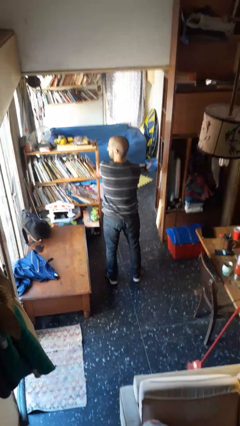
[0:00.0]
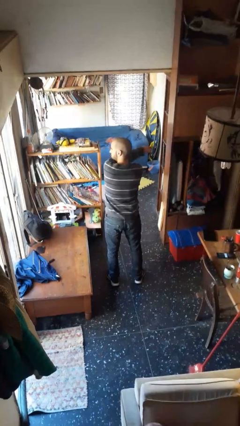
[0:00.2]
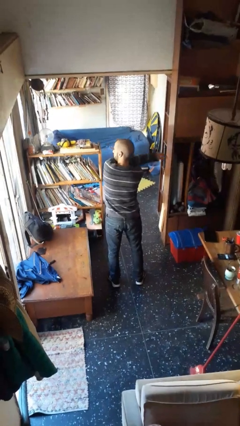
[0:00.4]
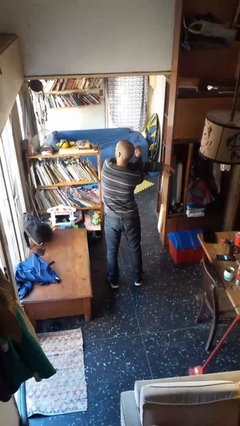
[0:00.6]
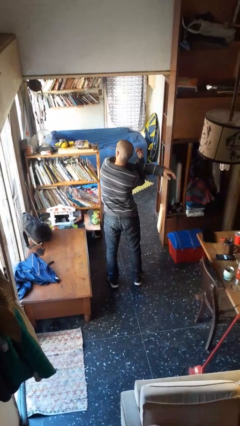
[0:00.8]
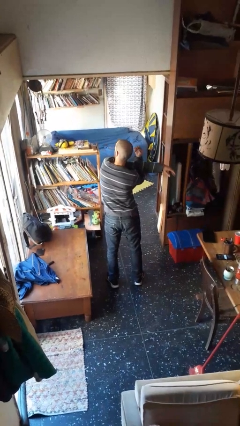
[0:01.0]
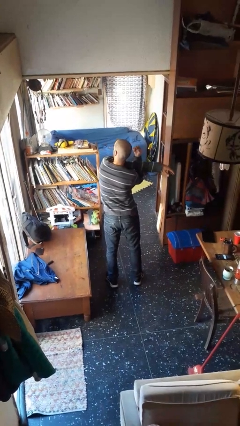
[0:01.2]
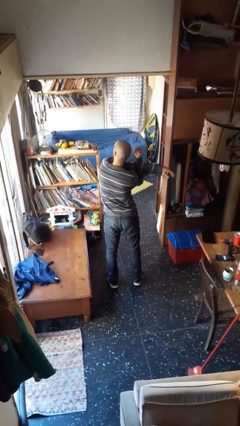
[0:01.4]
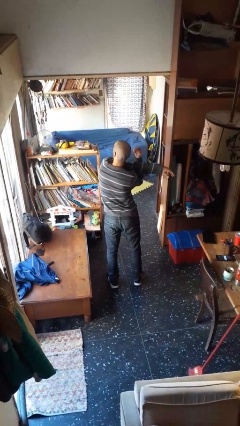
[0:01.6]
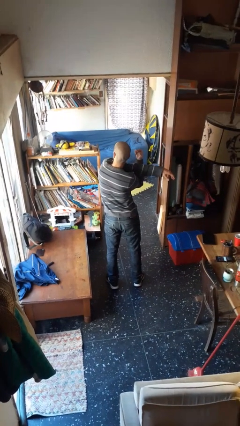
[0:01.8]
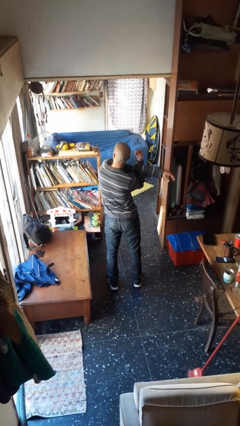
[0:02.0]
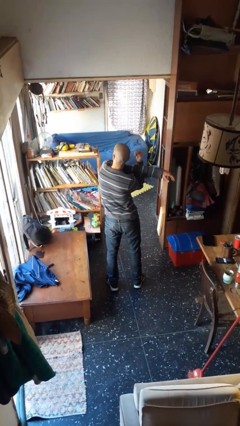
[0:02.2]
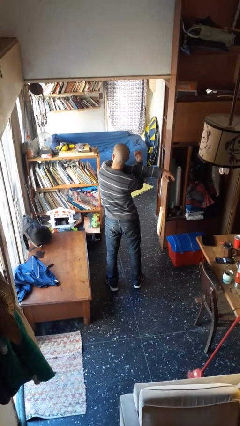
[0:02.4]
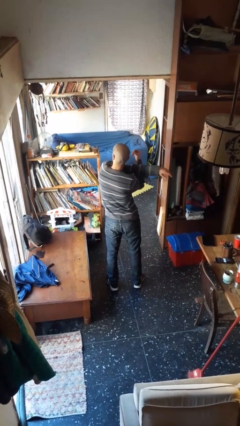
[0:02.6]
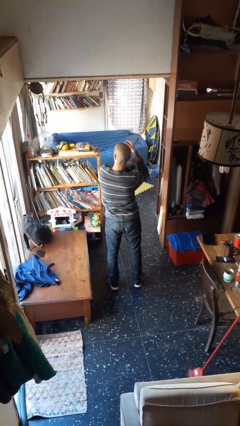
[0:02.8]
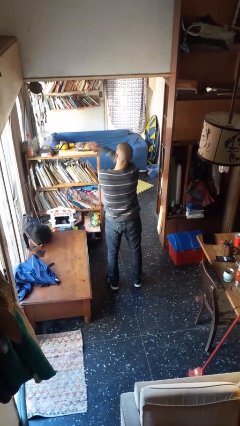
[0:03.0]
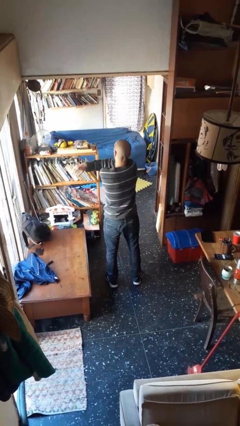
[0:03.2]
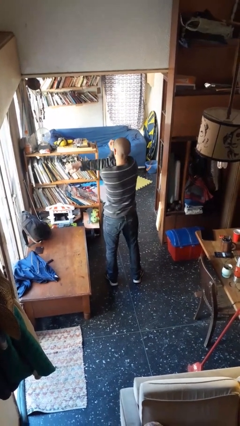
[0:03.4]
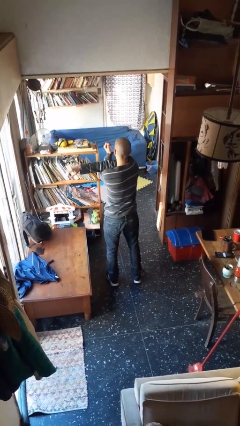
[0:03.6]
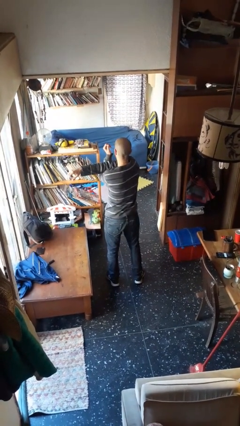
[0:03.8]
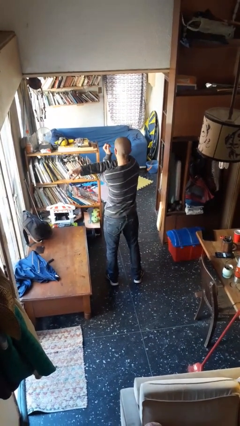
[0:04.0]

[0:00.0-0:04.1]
person stretches arms to side

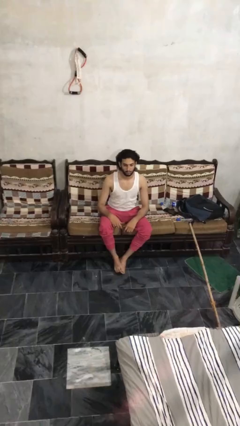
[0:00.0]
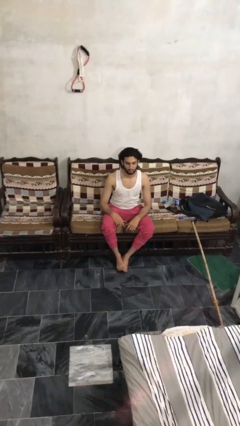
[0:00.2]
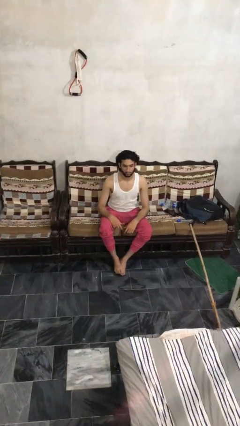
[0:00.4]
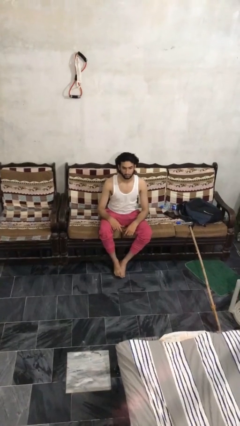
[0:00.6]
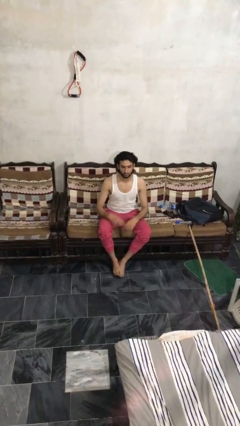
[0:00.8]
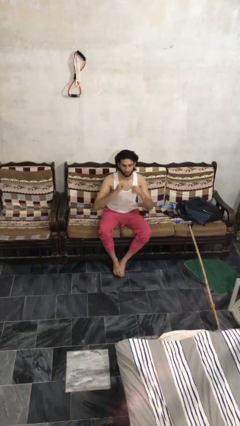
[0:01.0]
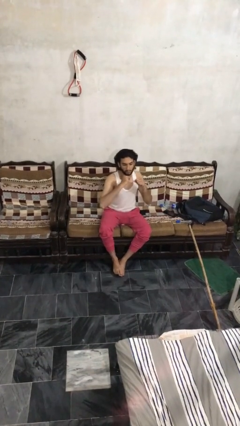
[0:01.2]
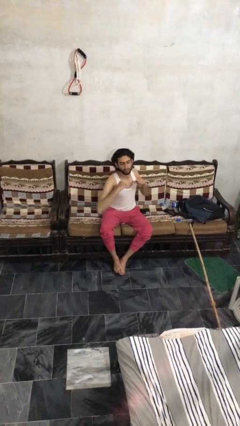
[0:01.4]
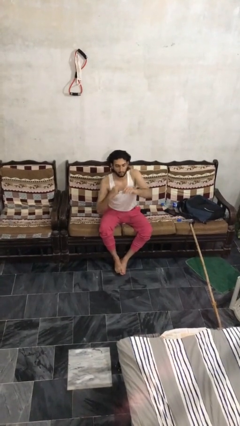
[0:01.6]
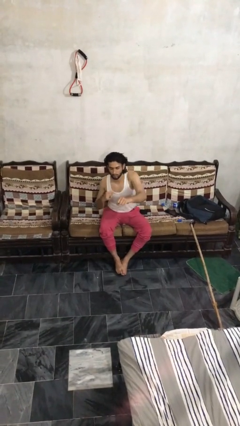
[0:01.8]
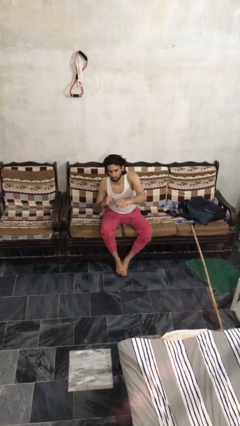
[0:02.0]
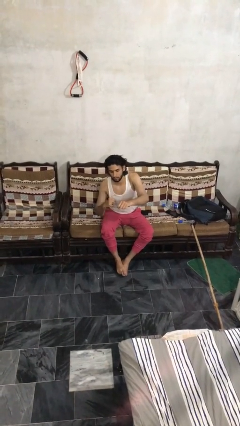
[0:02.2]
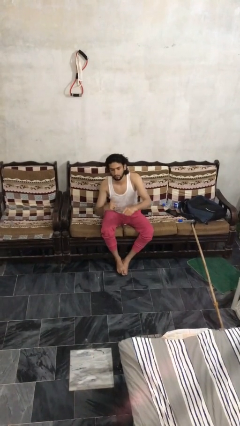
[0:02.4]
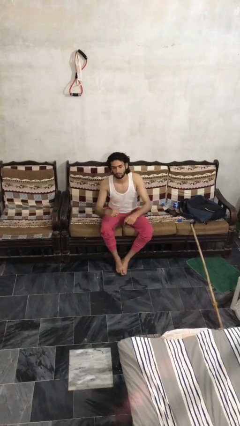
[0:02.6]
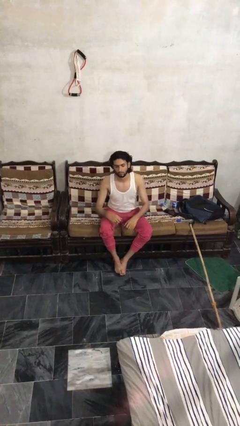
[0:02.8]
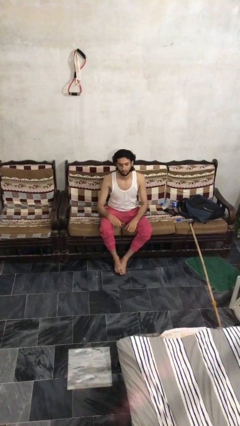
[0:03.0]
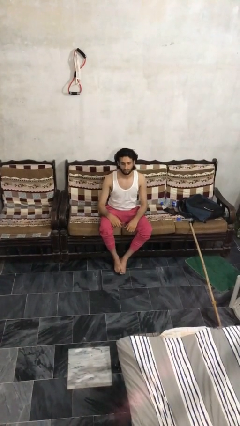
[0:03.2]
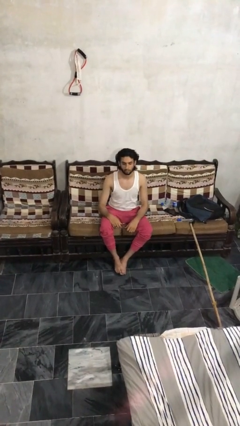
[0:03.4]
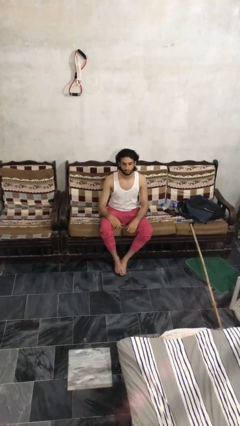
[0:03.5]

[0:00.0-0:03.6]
person punches

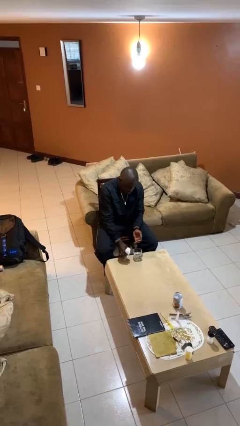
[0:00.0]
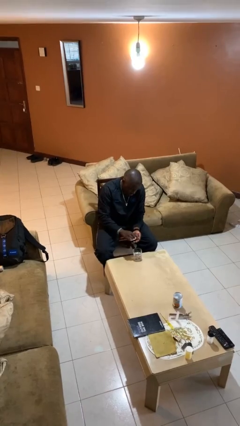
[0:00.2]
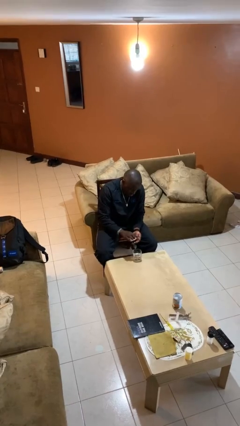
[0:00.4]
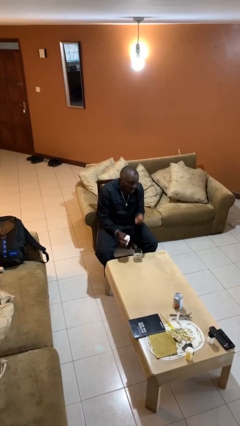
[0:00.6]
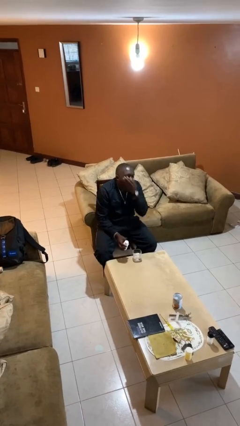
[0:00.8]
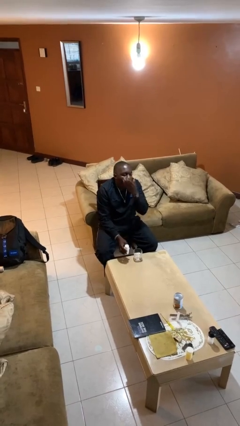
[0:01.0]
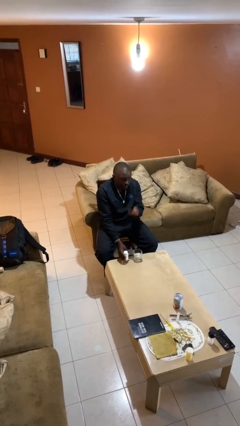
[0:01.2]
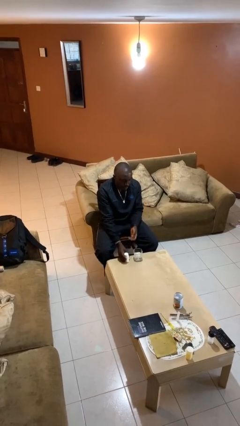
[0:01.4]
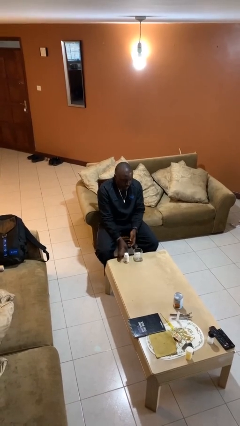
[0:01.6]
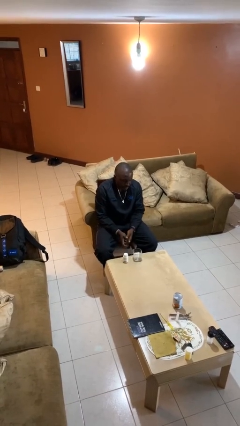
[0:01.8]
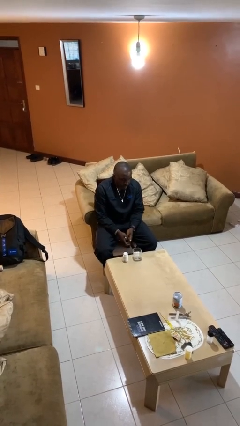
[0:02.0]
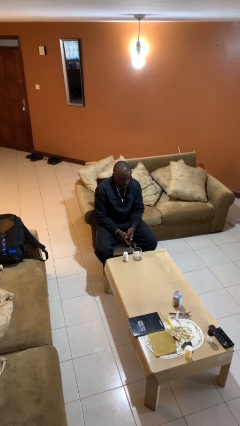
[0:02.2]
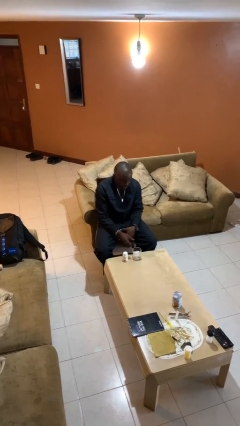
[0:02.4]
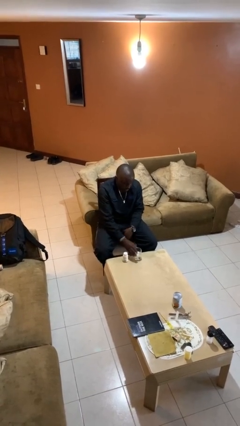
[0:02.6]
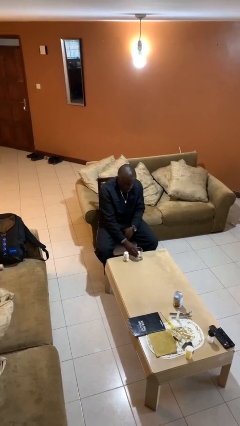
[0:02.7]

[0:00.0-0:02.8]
person takes medicine pills

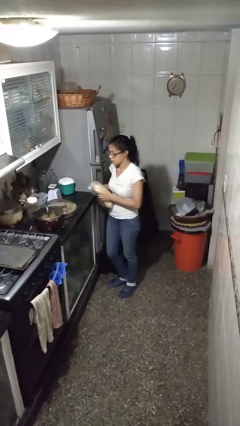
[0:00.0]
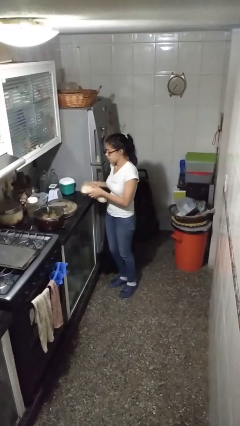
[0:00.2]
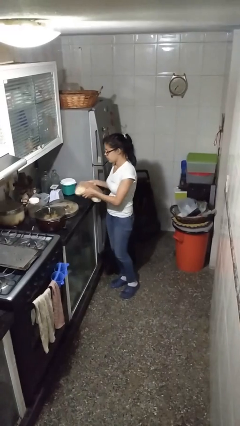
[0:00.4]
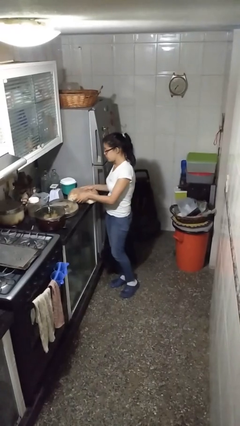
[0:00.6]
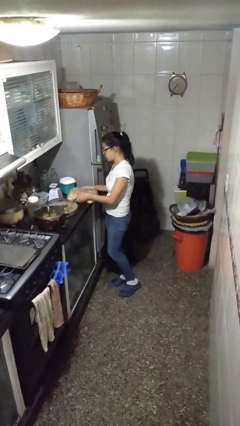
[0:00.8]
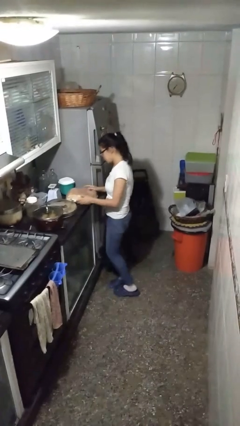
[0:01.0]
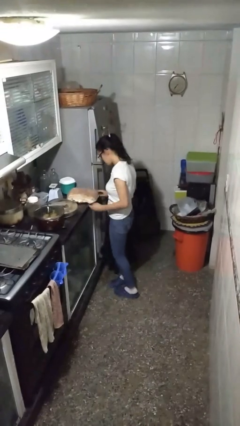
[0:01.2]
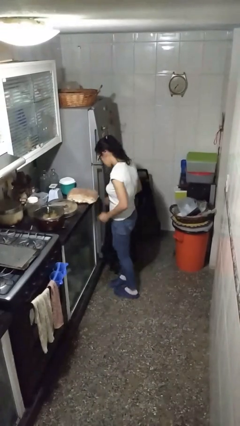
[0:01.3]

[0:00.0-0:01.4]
person puts down object on countertop

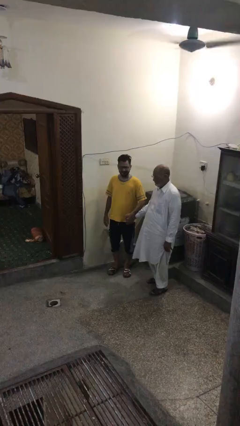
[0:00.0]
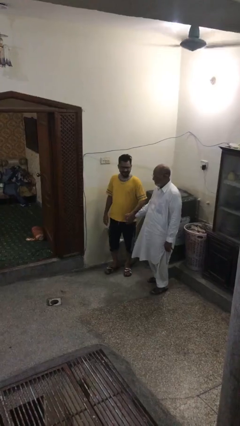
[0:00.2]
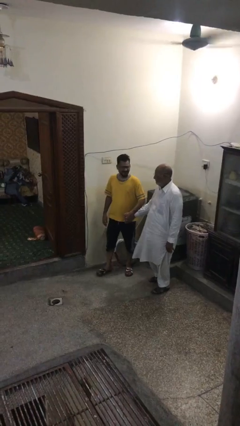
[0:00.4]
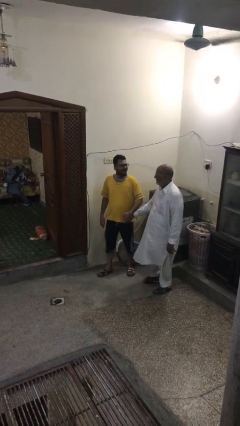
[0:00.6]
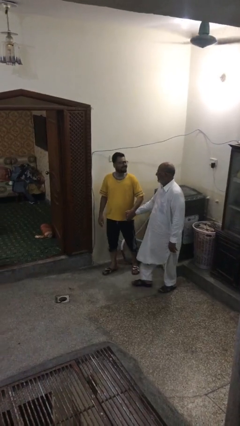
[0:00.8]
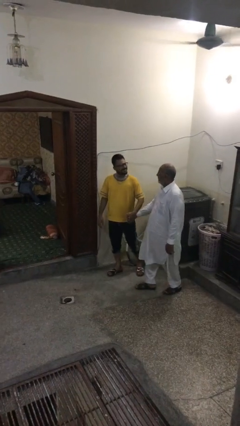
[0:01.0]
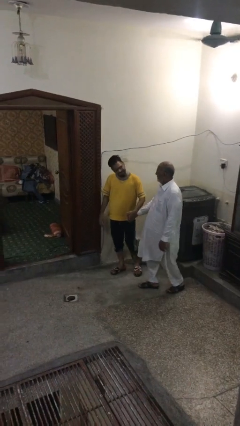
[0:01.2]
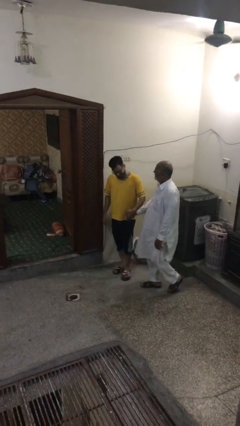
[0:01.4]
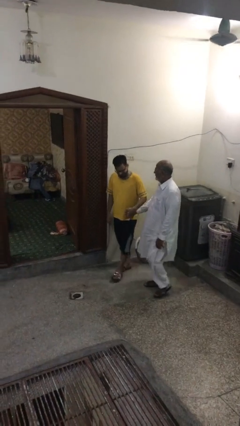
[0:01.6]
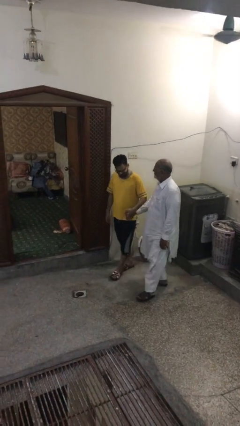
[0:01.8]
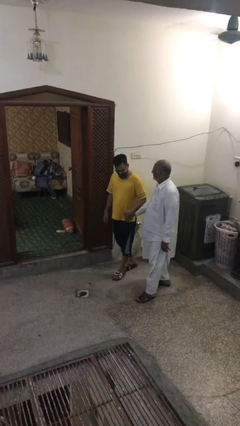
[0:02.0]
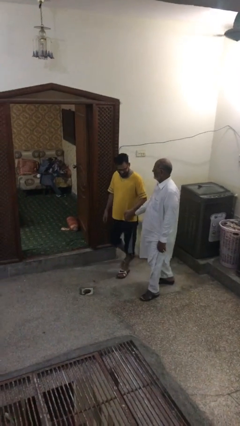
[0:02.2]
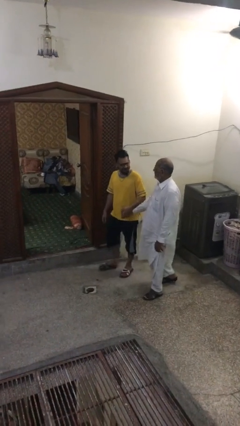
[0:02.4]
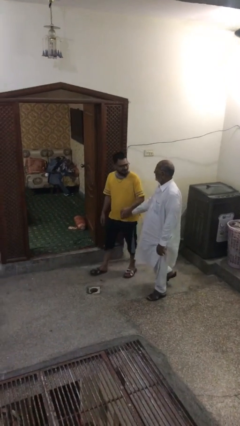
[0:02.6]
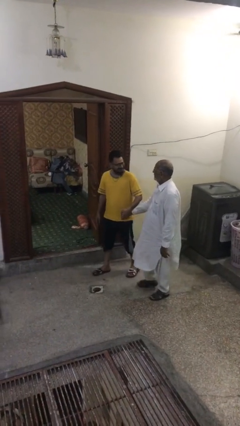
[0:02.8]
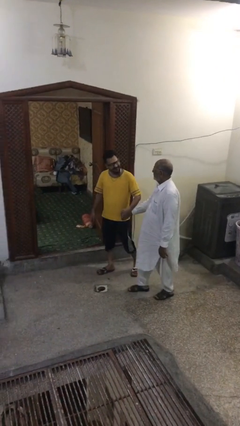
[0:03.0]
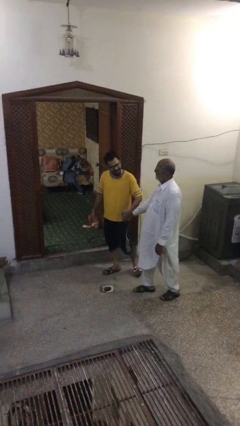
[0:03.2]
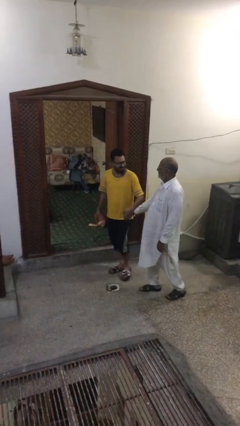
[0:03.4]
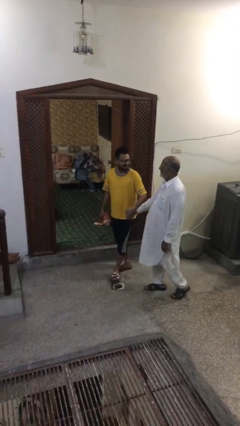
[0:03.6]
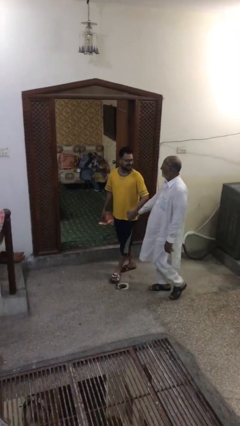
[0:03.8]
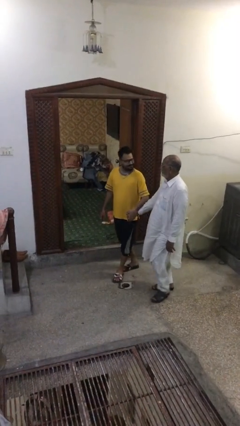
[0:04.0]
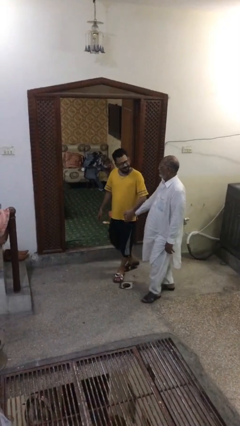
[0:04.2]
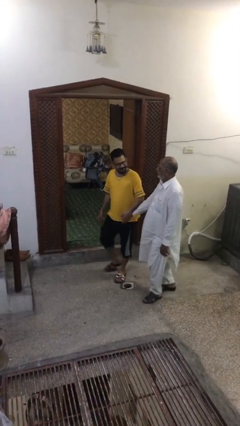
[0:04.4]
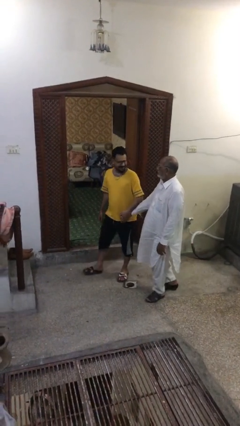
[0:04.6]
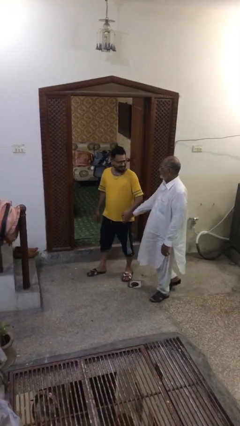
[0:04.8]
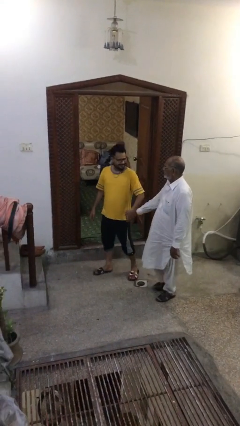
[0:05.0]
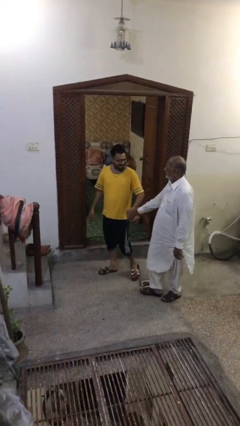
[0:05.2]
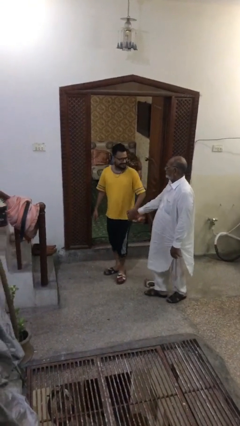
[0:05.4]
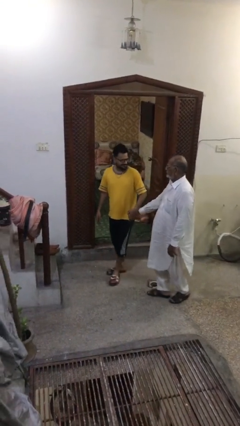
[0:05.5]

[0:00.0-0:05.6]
person holds hand

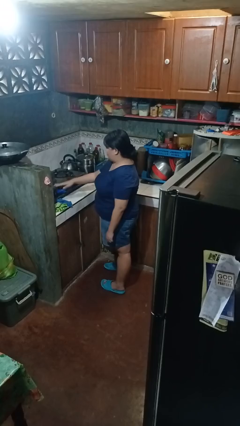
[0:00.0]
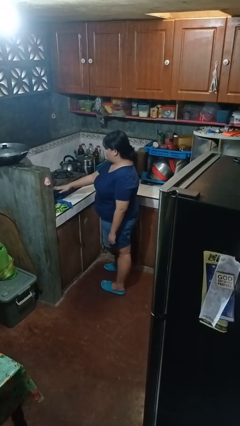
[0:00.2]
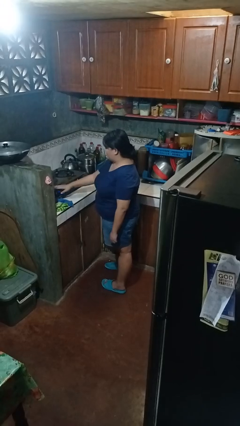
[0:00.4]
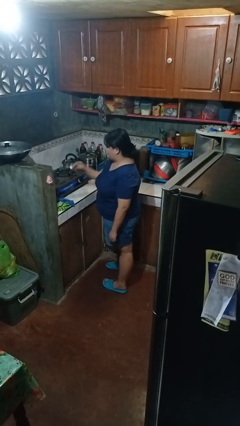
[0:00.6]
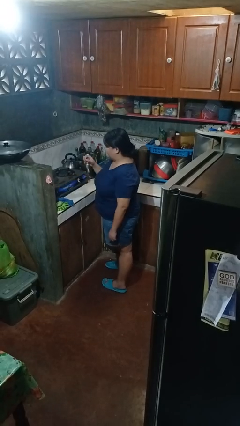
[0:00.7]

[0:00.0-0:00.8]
person burns hand
